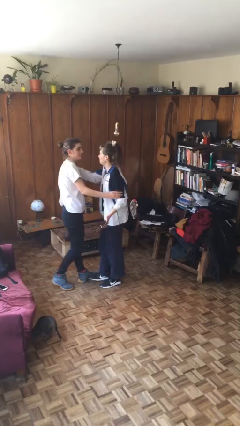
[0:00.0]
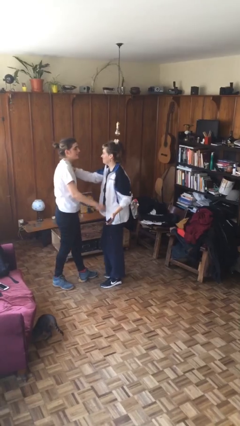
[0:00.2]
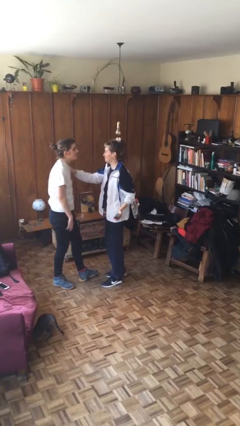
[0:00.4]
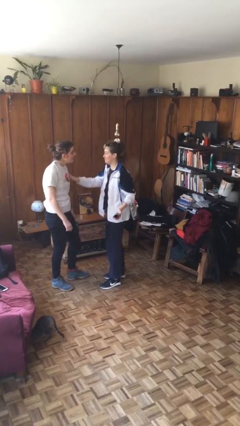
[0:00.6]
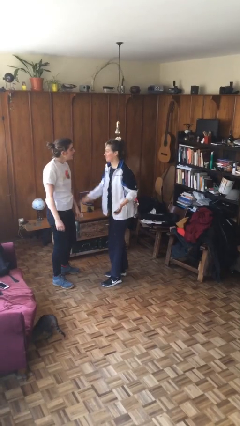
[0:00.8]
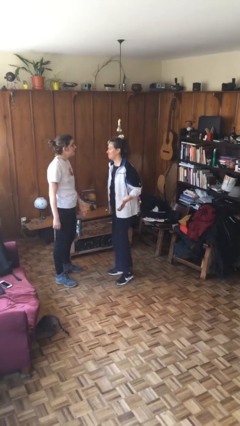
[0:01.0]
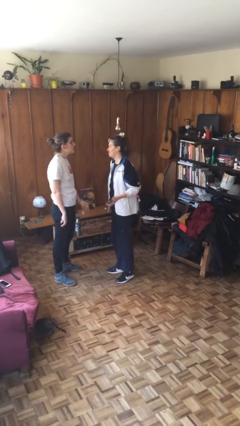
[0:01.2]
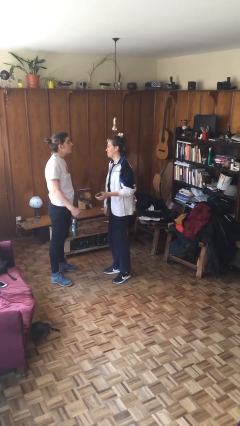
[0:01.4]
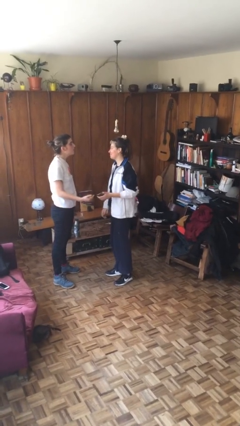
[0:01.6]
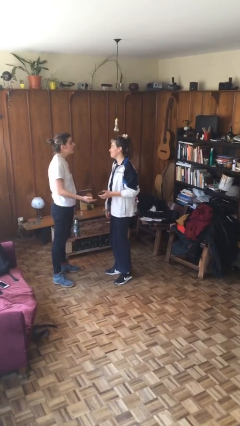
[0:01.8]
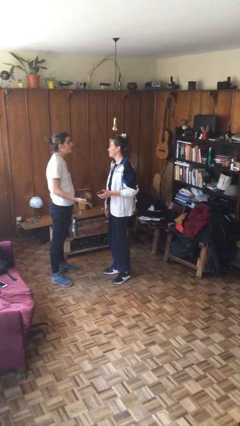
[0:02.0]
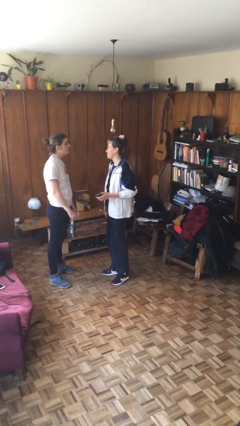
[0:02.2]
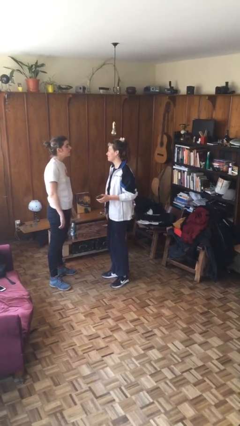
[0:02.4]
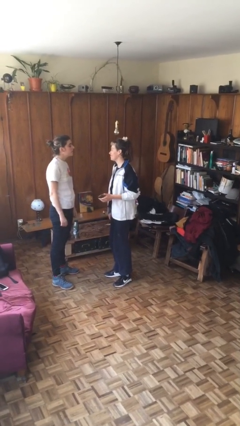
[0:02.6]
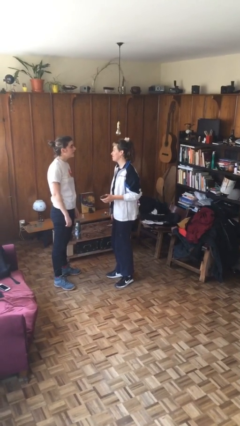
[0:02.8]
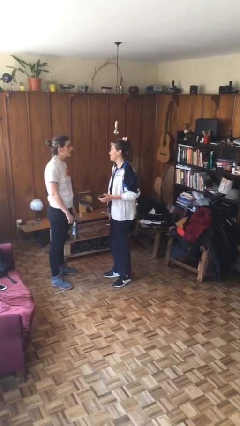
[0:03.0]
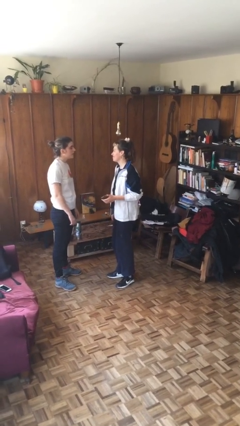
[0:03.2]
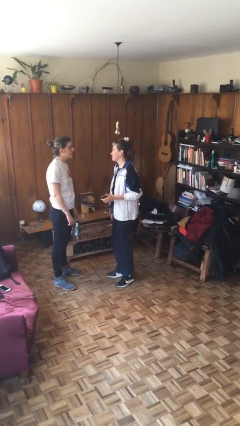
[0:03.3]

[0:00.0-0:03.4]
person talks to person

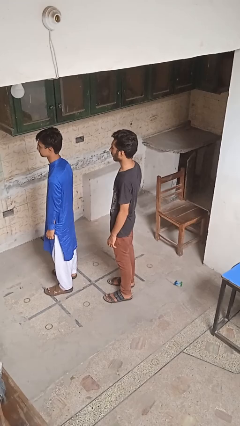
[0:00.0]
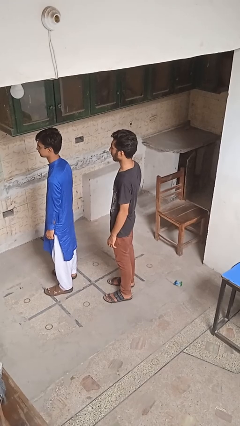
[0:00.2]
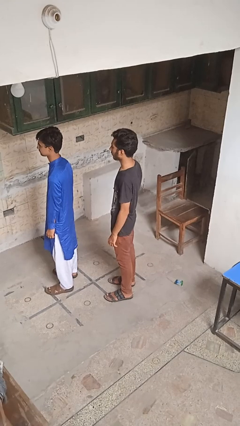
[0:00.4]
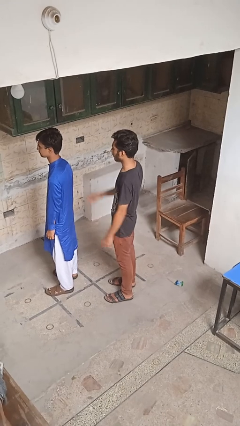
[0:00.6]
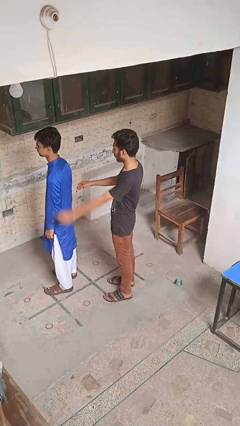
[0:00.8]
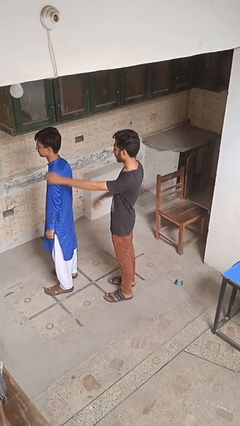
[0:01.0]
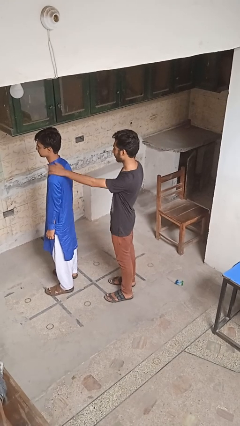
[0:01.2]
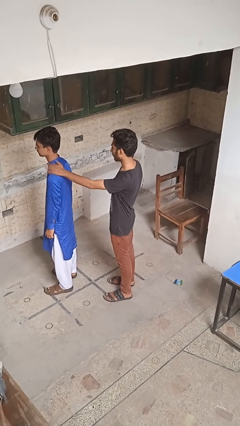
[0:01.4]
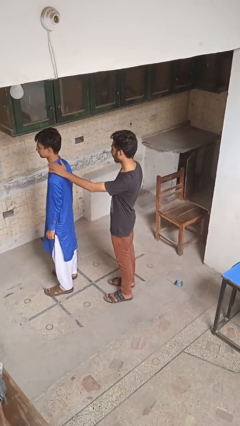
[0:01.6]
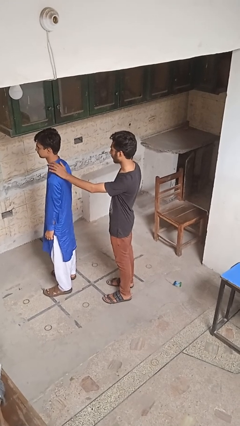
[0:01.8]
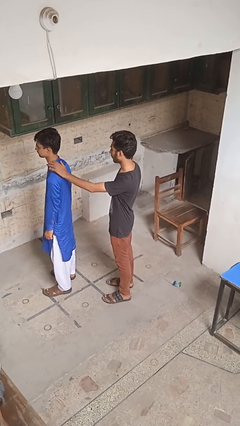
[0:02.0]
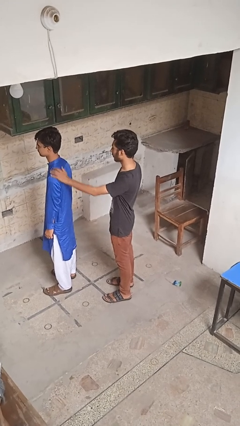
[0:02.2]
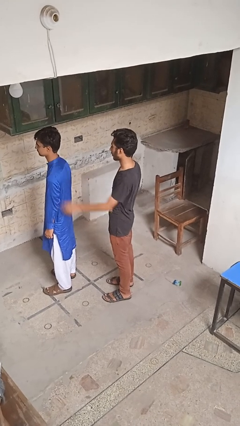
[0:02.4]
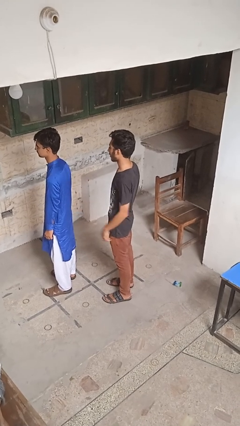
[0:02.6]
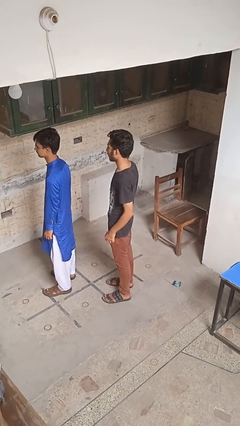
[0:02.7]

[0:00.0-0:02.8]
person touches back of person

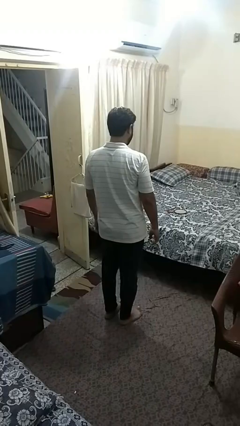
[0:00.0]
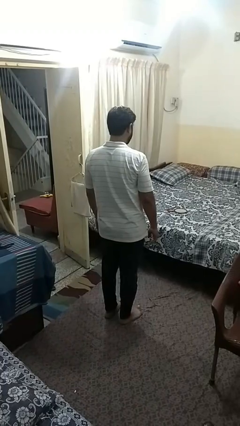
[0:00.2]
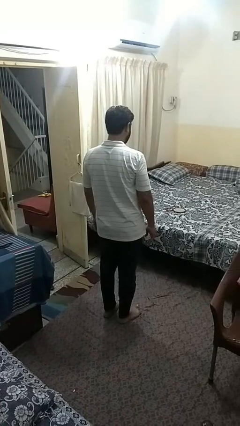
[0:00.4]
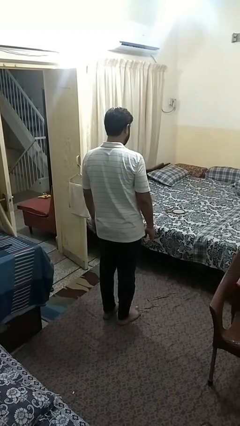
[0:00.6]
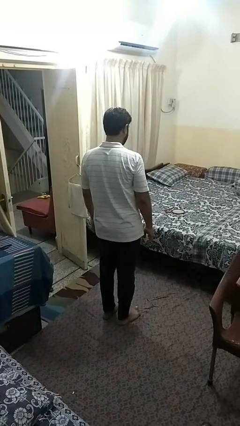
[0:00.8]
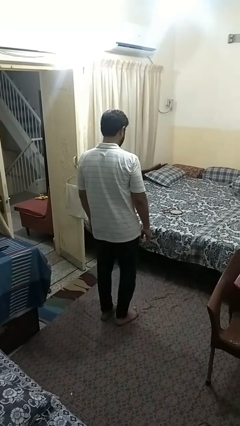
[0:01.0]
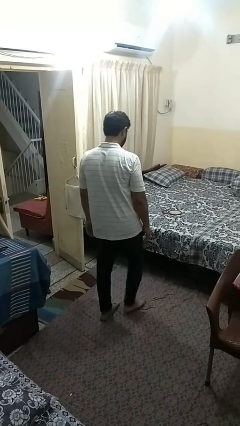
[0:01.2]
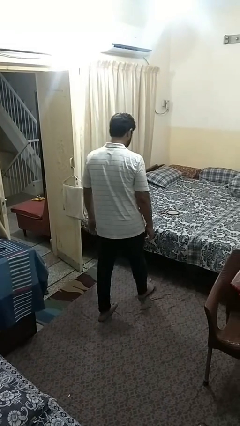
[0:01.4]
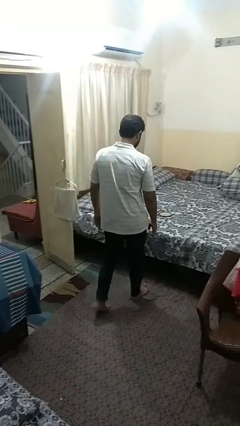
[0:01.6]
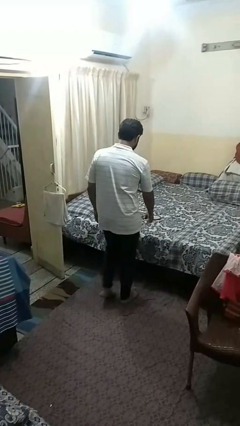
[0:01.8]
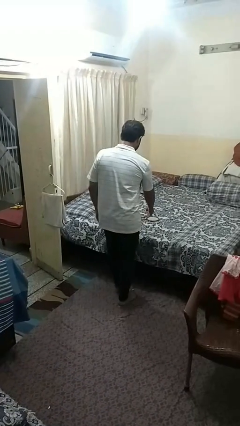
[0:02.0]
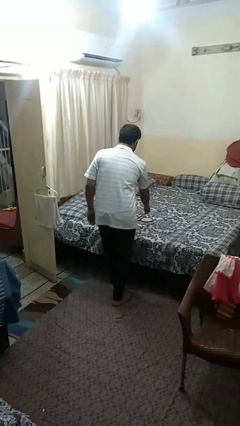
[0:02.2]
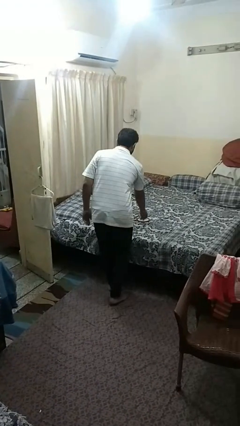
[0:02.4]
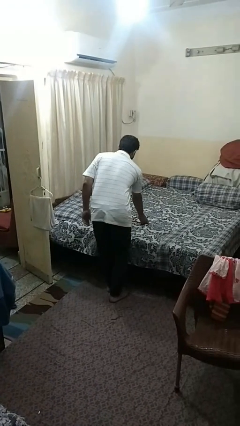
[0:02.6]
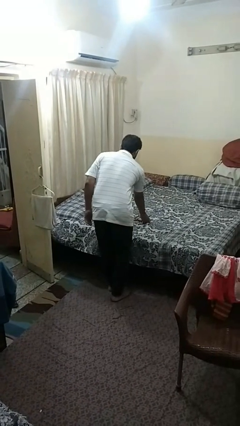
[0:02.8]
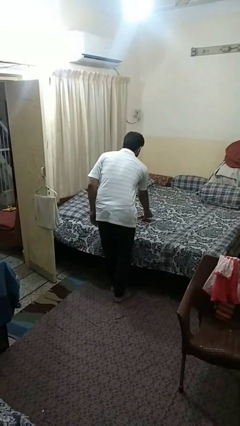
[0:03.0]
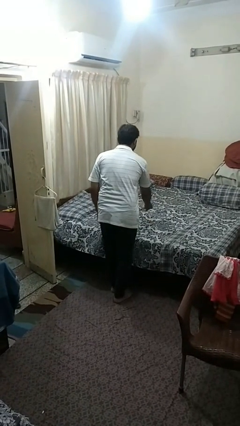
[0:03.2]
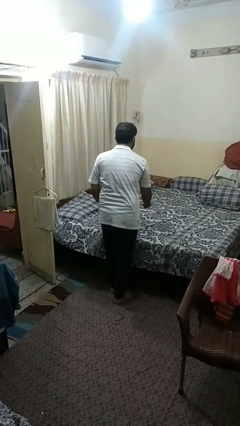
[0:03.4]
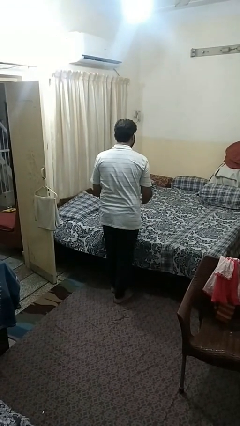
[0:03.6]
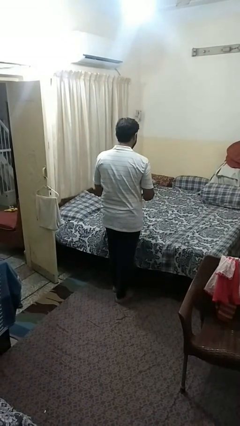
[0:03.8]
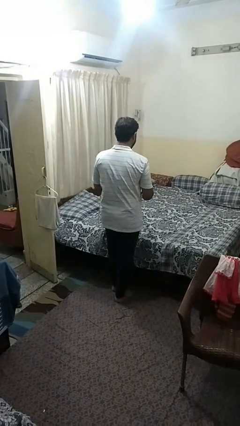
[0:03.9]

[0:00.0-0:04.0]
person picks up object from bed

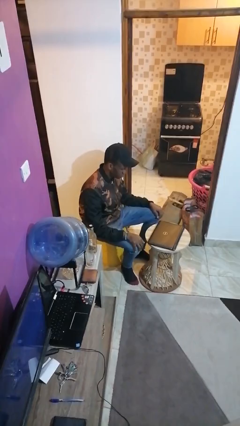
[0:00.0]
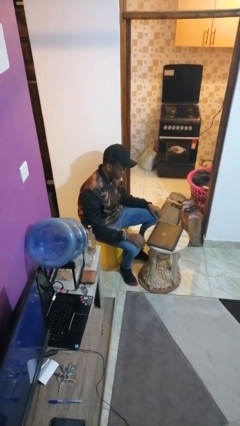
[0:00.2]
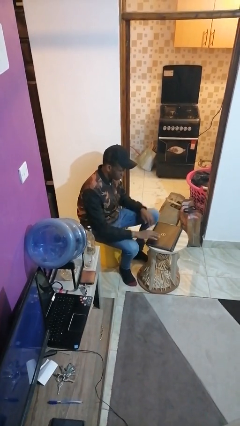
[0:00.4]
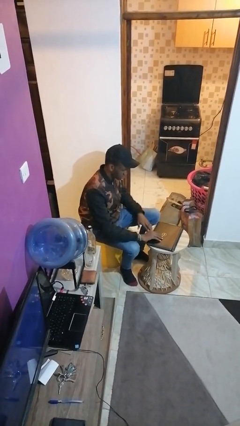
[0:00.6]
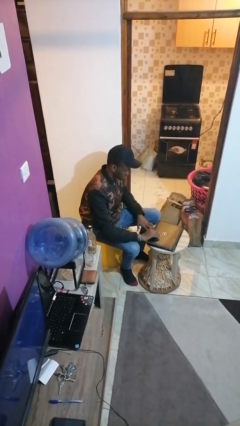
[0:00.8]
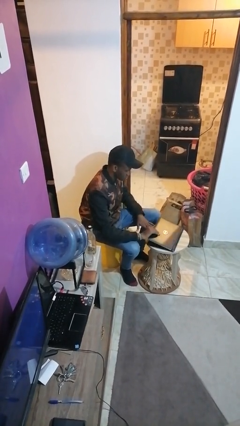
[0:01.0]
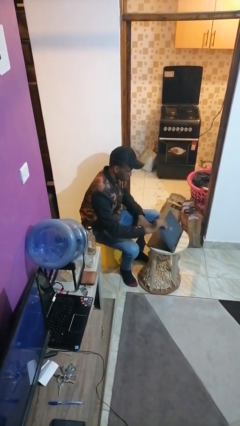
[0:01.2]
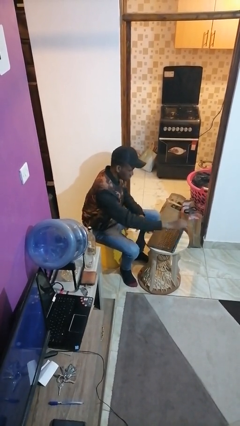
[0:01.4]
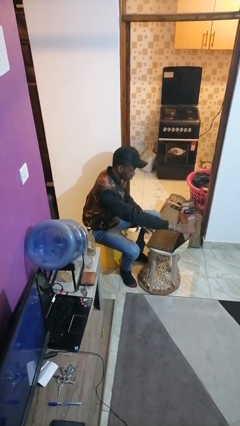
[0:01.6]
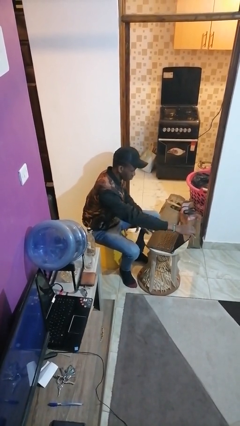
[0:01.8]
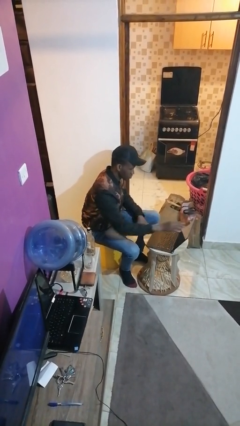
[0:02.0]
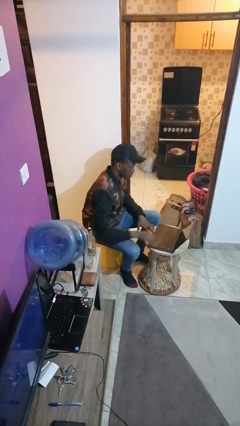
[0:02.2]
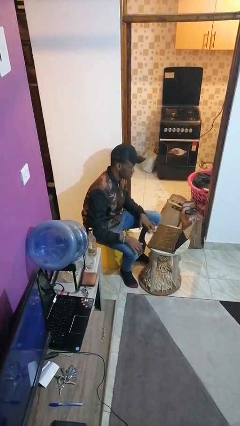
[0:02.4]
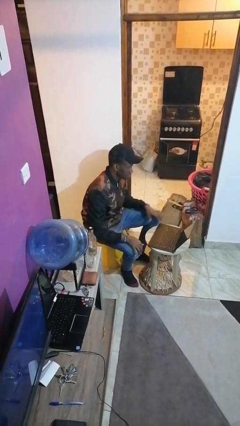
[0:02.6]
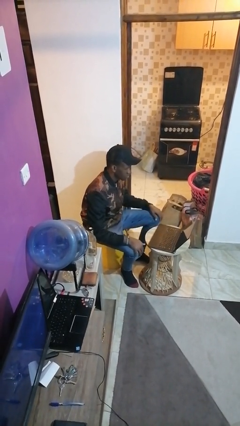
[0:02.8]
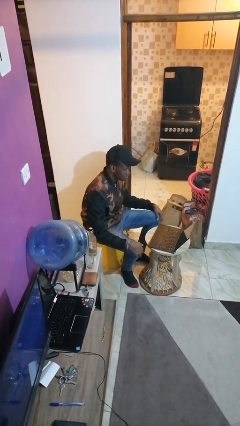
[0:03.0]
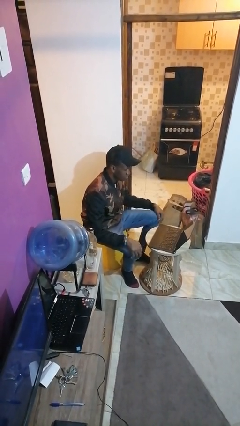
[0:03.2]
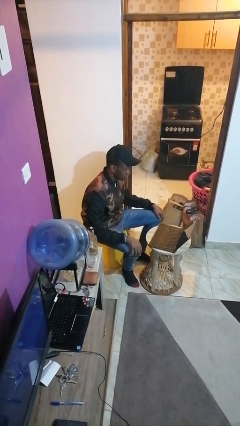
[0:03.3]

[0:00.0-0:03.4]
person opens laptop

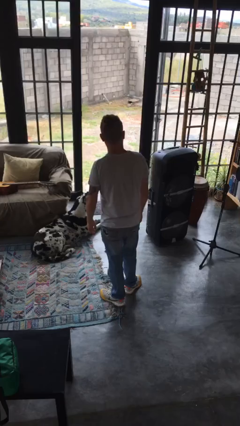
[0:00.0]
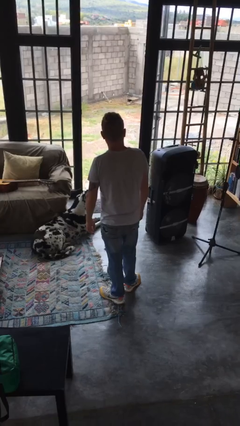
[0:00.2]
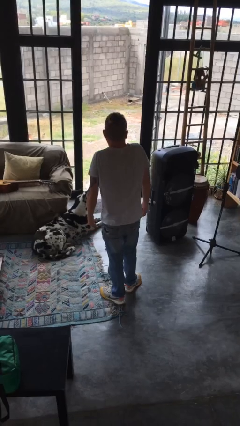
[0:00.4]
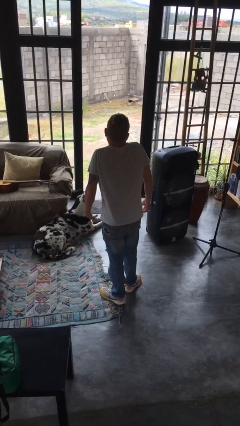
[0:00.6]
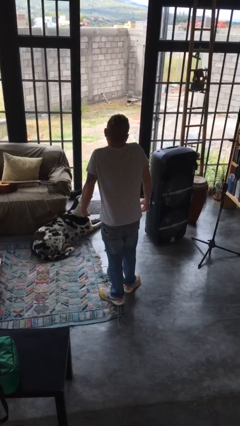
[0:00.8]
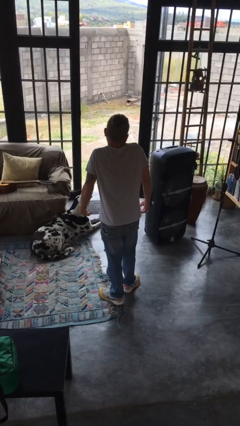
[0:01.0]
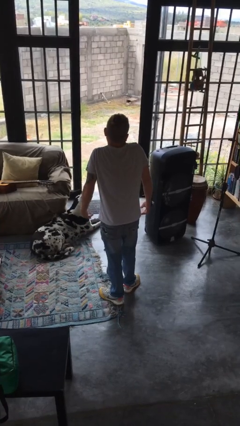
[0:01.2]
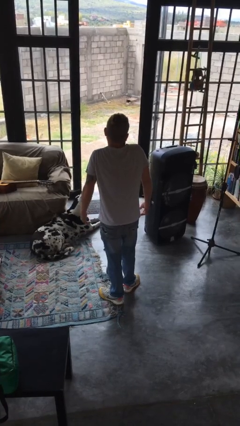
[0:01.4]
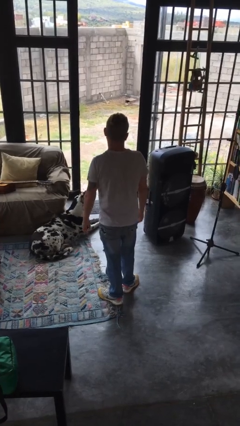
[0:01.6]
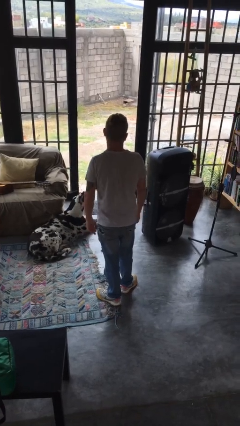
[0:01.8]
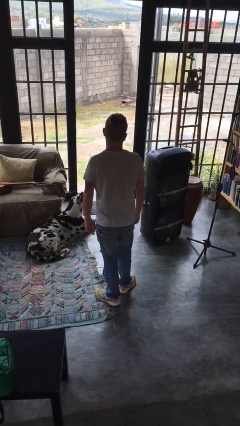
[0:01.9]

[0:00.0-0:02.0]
person shrugs

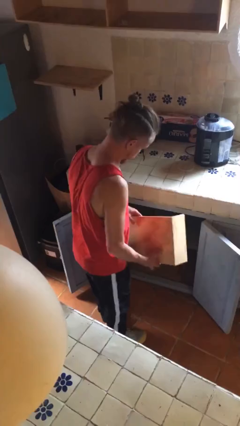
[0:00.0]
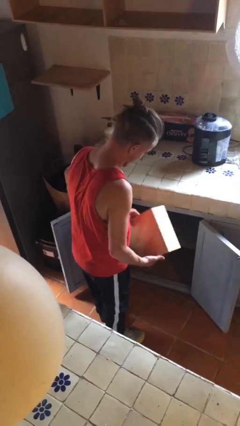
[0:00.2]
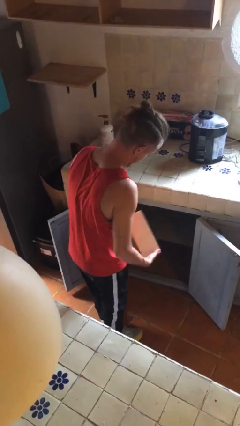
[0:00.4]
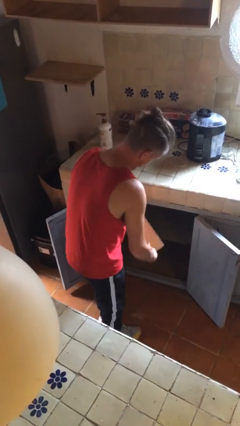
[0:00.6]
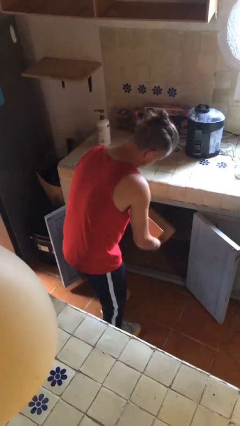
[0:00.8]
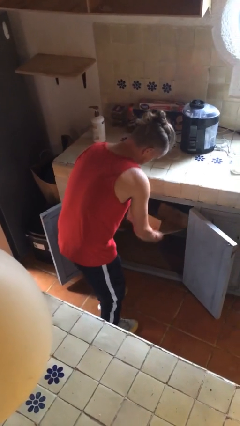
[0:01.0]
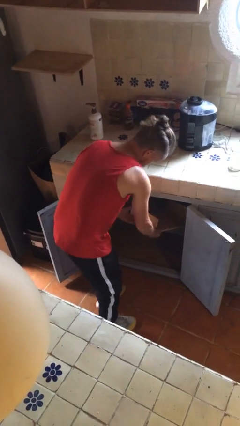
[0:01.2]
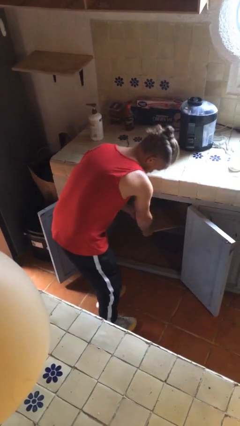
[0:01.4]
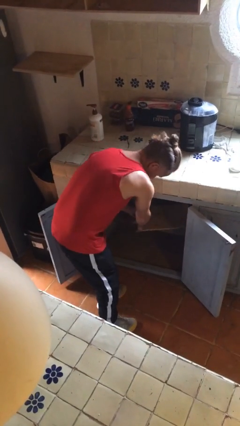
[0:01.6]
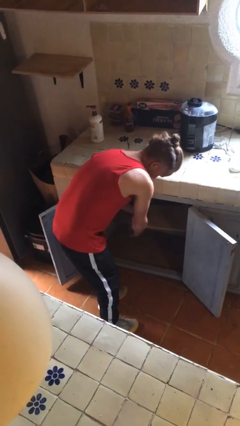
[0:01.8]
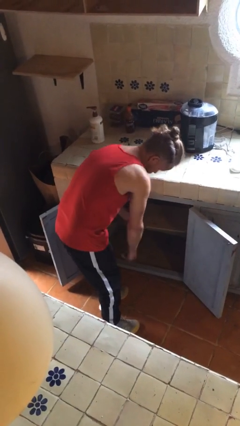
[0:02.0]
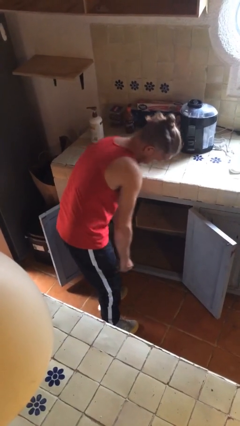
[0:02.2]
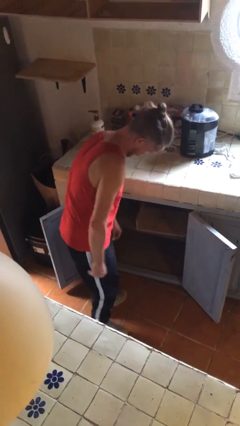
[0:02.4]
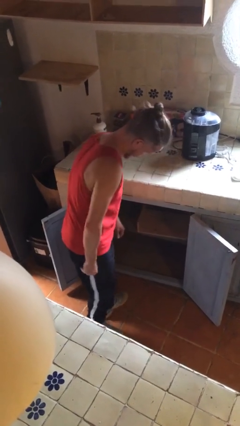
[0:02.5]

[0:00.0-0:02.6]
person puts down object into cabinet
